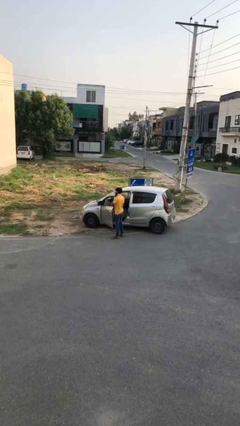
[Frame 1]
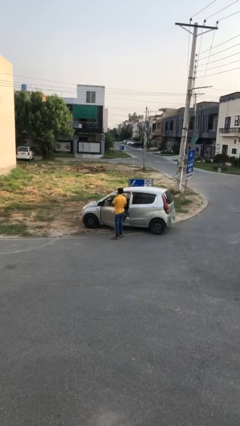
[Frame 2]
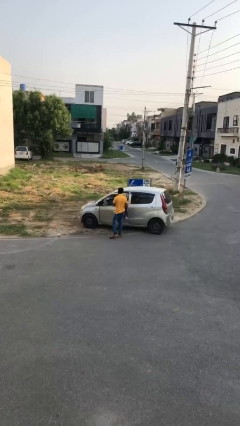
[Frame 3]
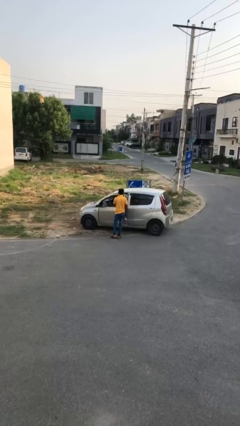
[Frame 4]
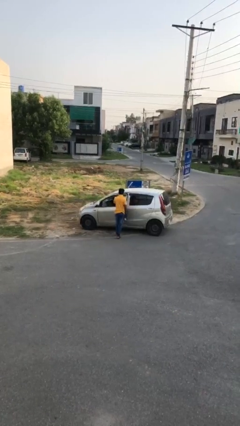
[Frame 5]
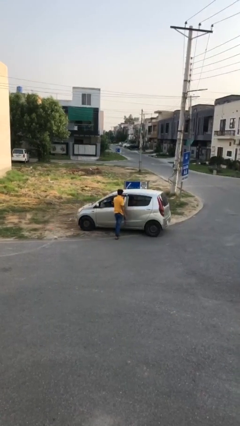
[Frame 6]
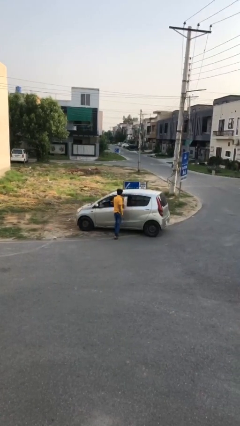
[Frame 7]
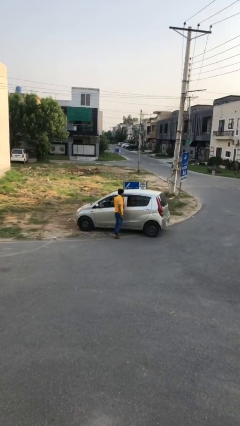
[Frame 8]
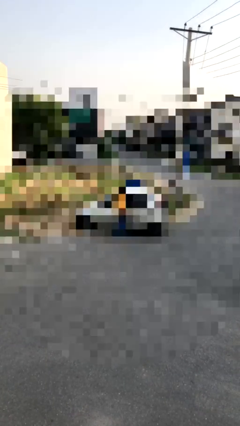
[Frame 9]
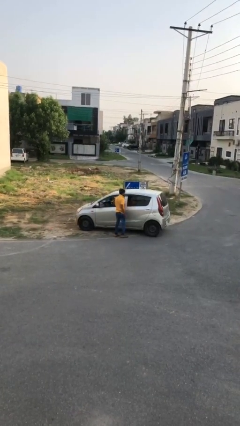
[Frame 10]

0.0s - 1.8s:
person closes car door

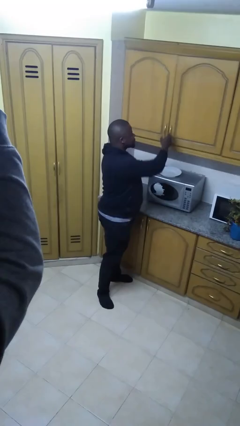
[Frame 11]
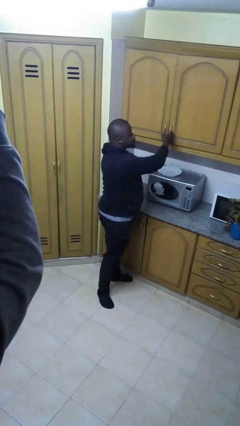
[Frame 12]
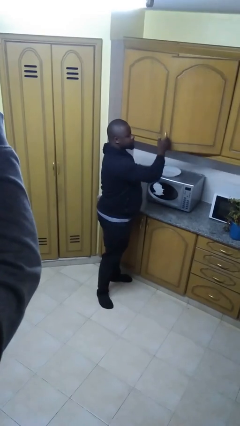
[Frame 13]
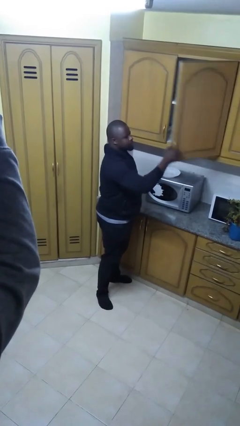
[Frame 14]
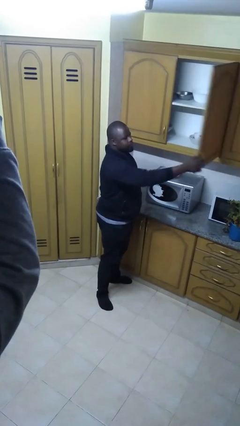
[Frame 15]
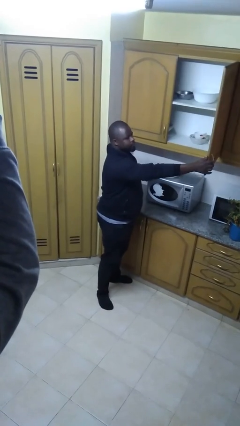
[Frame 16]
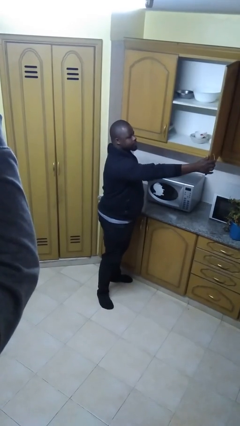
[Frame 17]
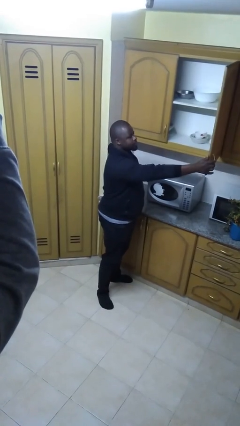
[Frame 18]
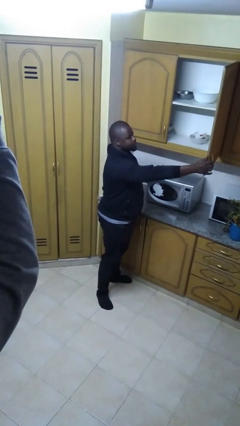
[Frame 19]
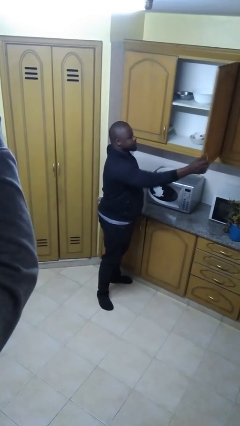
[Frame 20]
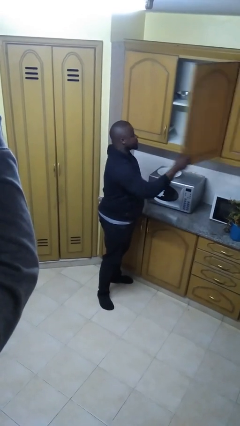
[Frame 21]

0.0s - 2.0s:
person opens cabinet

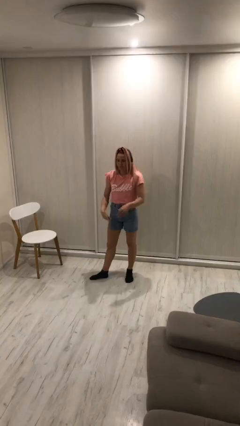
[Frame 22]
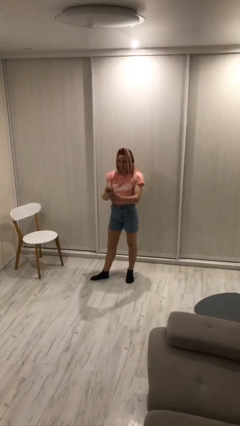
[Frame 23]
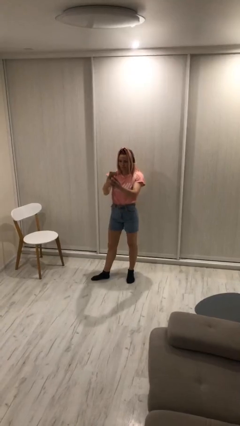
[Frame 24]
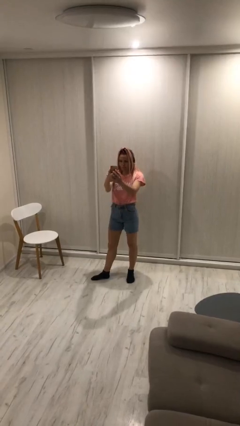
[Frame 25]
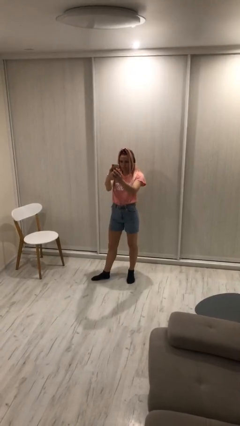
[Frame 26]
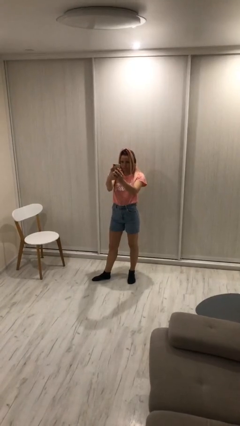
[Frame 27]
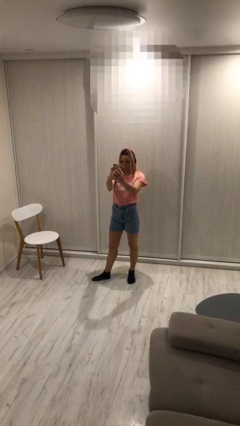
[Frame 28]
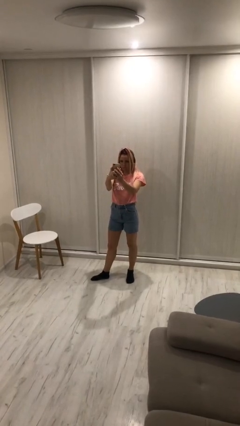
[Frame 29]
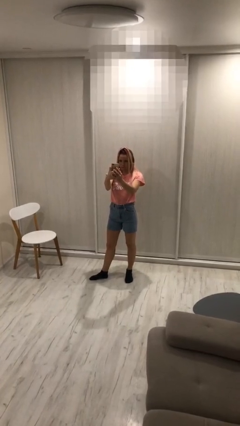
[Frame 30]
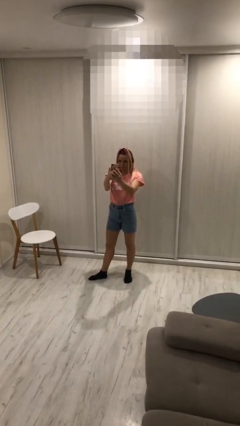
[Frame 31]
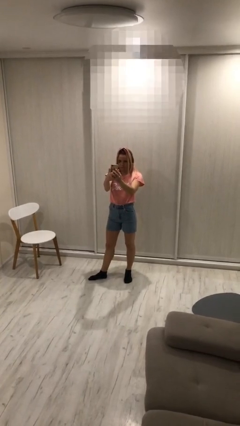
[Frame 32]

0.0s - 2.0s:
person takes selfie

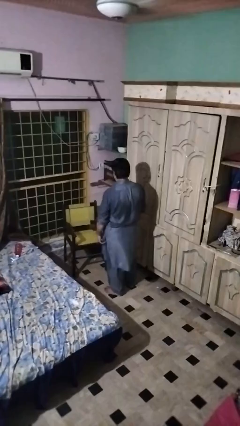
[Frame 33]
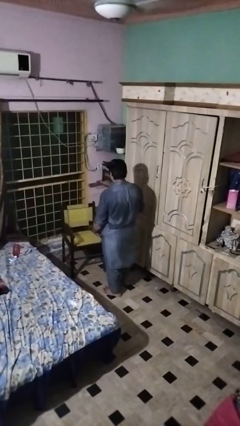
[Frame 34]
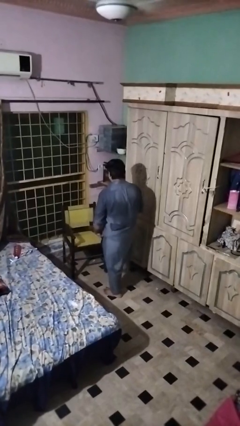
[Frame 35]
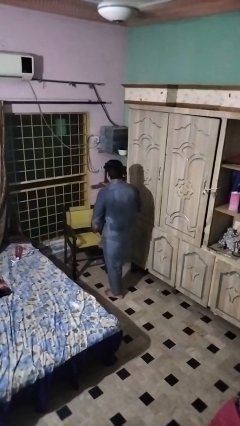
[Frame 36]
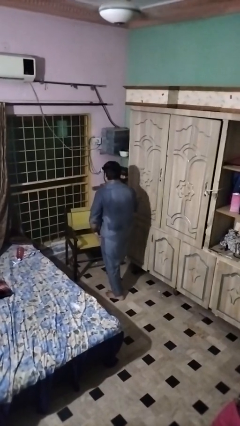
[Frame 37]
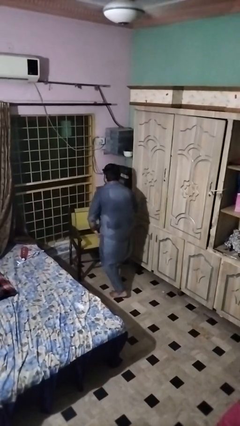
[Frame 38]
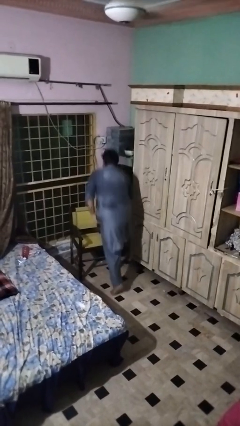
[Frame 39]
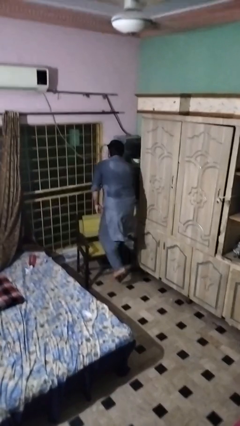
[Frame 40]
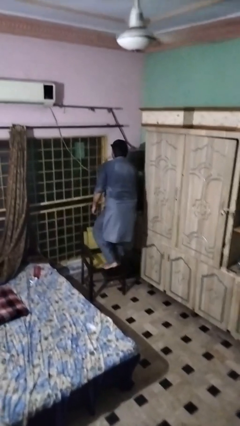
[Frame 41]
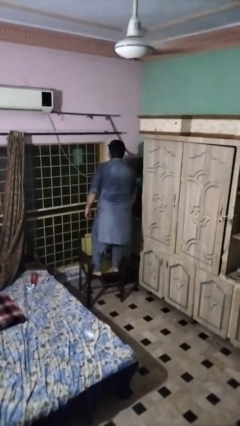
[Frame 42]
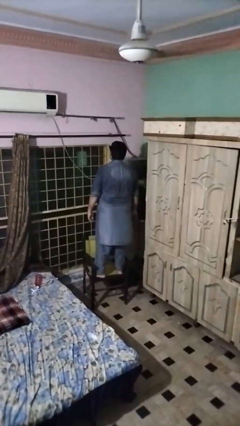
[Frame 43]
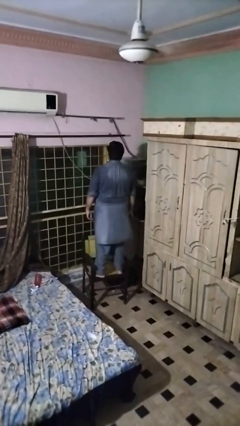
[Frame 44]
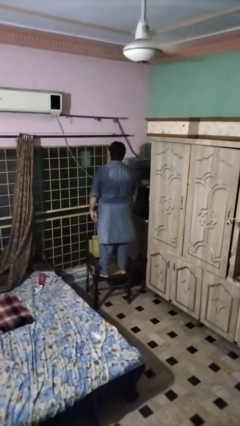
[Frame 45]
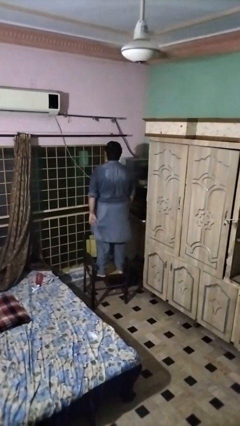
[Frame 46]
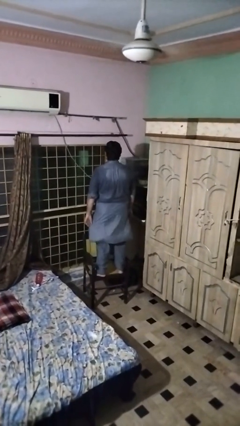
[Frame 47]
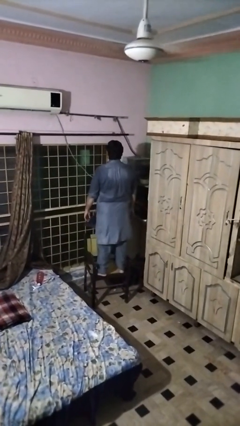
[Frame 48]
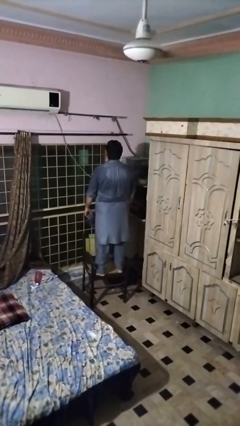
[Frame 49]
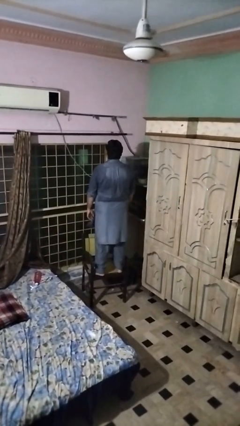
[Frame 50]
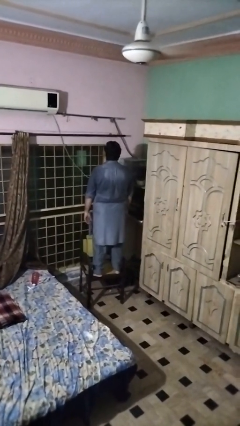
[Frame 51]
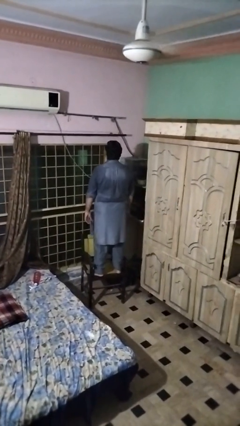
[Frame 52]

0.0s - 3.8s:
person climbs on chair

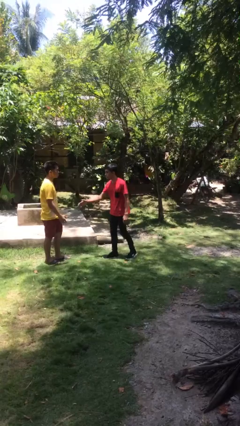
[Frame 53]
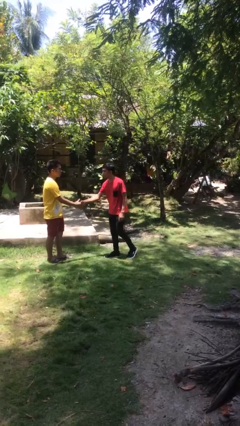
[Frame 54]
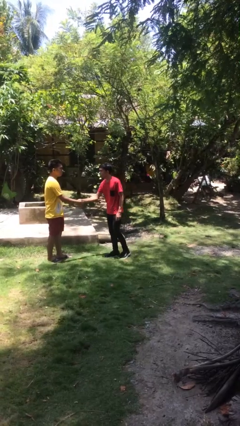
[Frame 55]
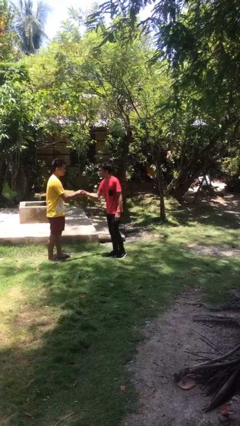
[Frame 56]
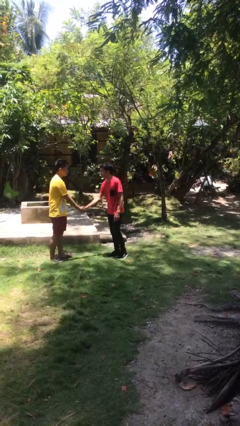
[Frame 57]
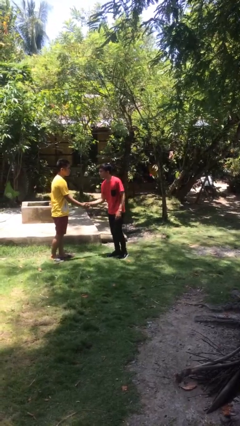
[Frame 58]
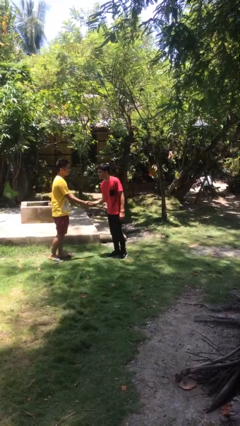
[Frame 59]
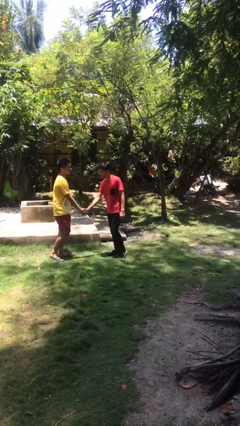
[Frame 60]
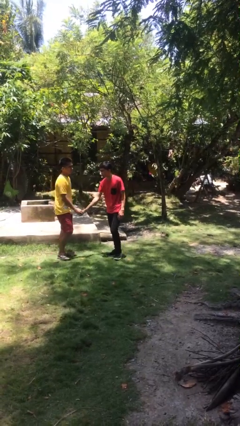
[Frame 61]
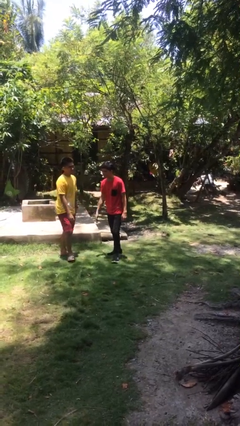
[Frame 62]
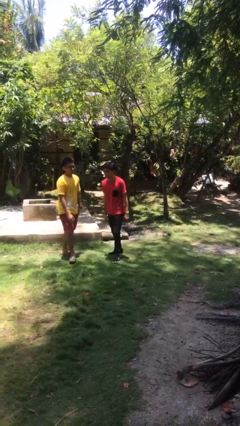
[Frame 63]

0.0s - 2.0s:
person shakes hand

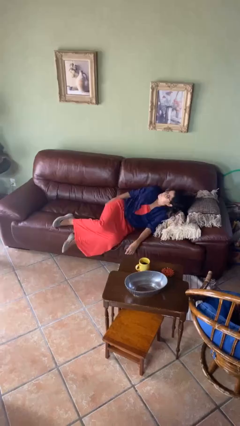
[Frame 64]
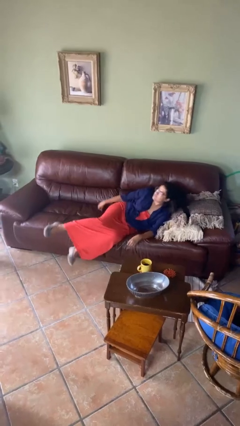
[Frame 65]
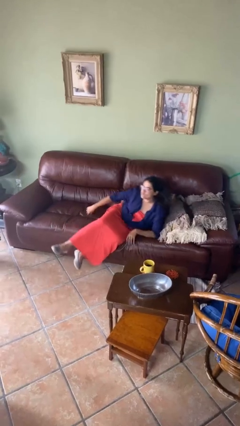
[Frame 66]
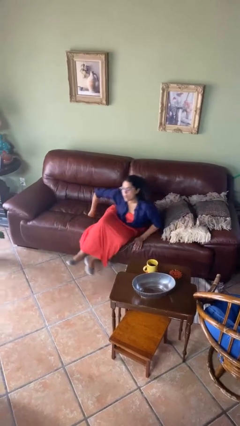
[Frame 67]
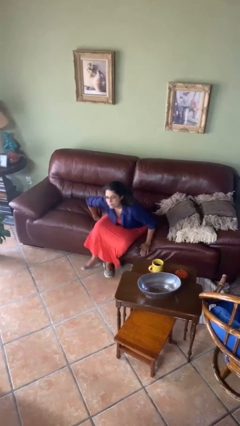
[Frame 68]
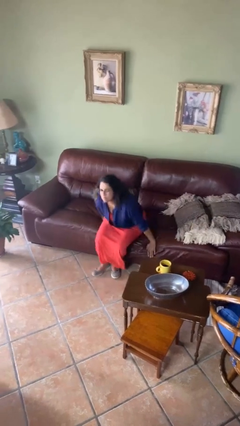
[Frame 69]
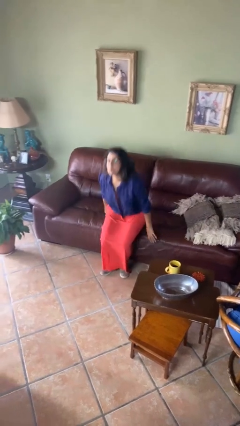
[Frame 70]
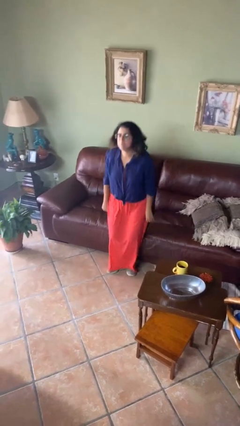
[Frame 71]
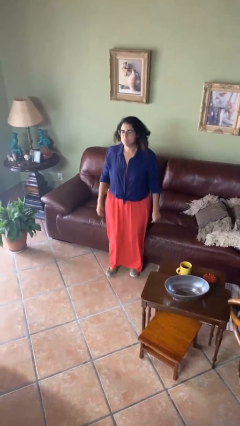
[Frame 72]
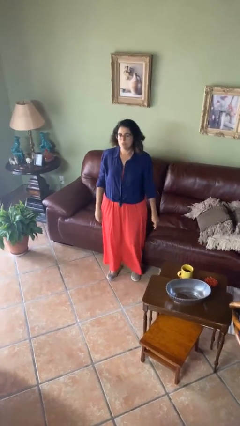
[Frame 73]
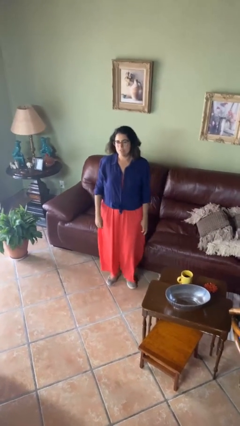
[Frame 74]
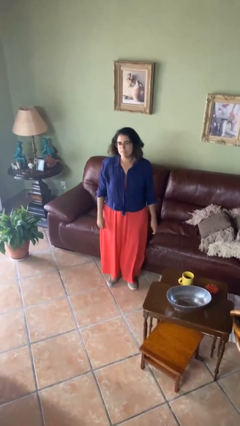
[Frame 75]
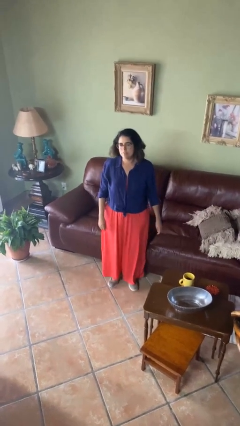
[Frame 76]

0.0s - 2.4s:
person stands up

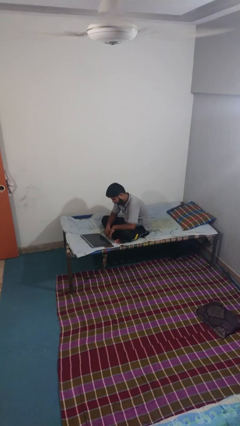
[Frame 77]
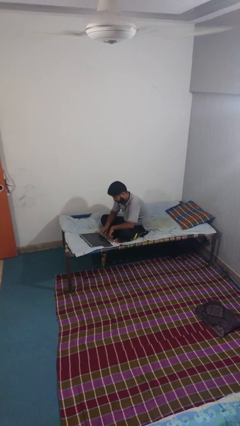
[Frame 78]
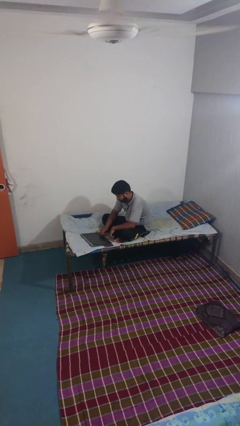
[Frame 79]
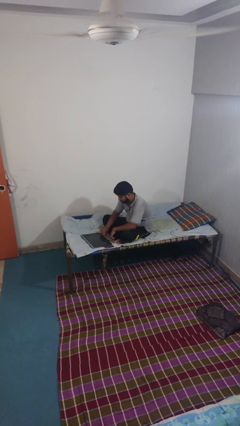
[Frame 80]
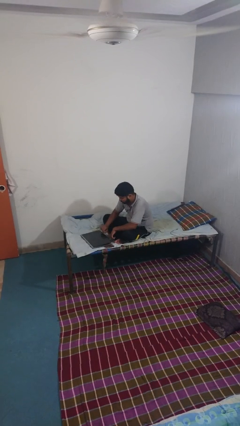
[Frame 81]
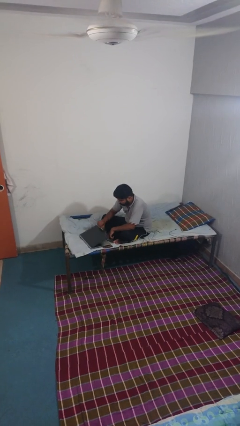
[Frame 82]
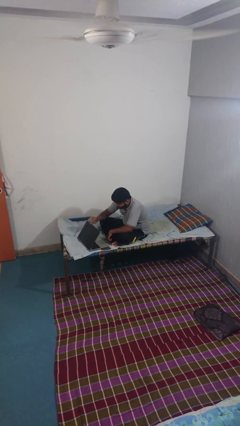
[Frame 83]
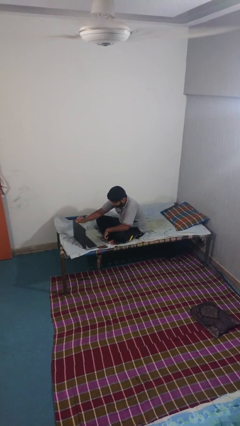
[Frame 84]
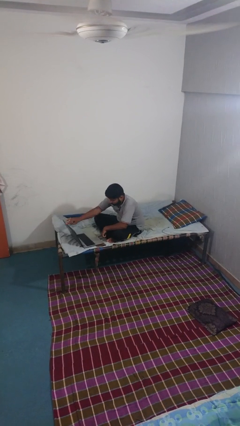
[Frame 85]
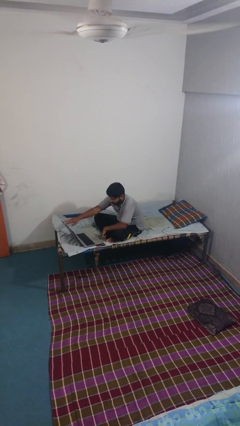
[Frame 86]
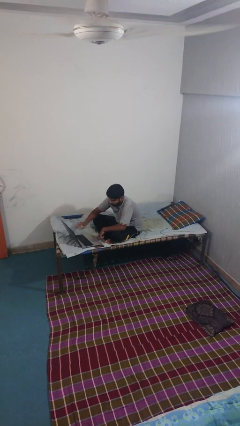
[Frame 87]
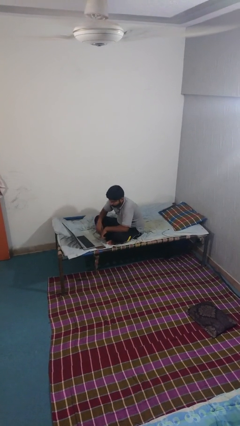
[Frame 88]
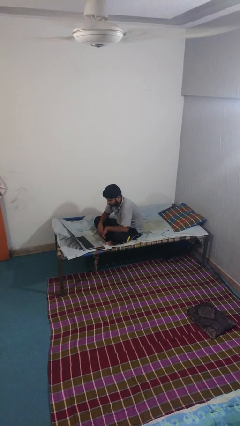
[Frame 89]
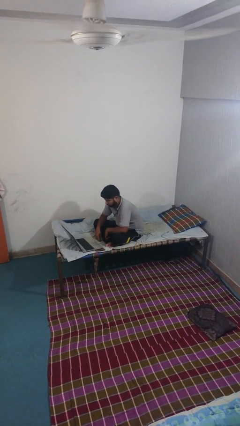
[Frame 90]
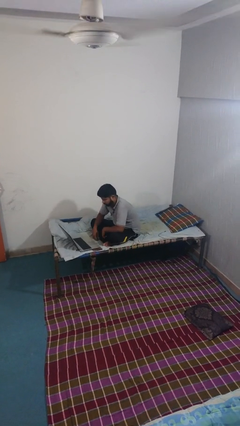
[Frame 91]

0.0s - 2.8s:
person opens laptop

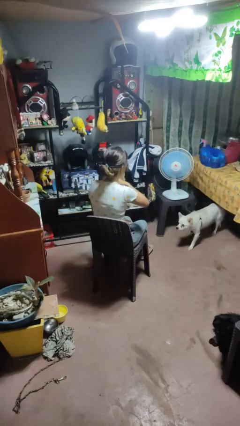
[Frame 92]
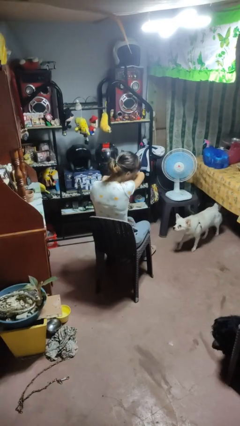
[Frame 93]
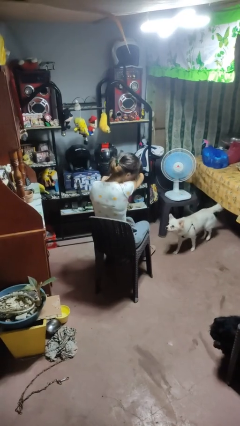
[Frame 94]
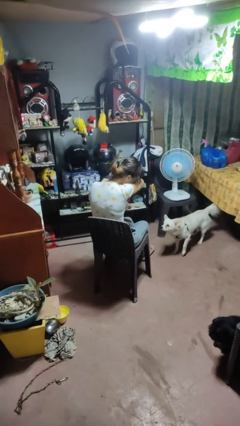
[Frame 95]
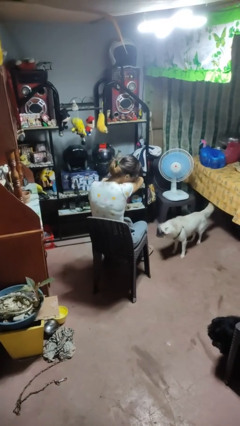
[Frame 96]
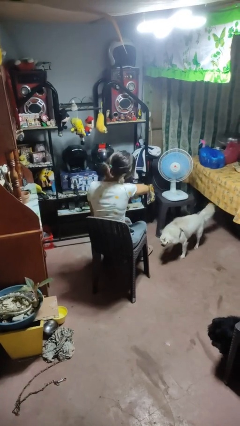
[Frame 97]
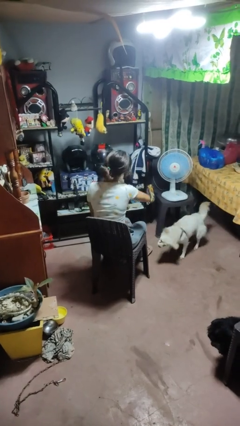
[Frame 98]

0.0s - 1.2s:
person sneezes into arm
